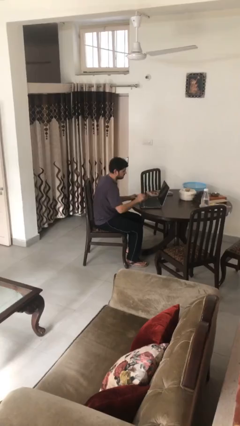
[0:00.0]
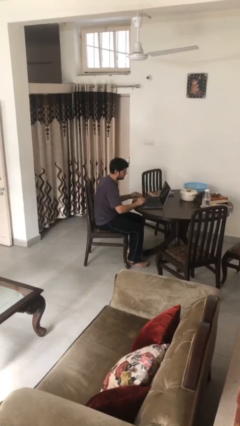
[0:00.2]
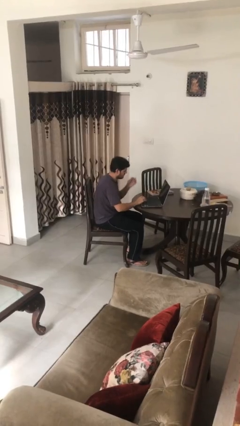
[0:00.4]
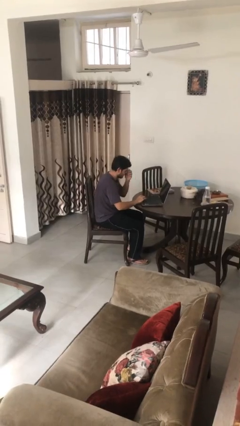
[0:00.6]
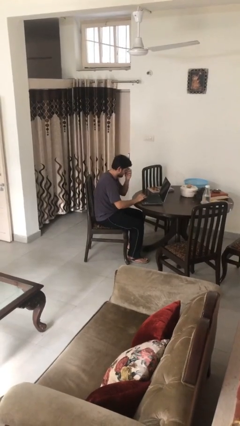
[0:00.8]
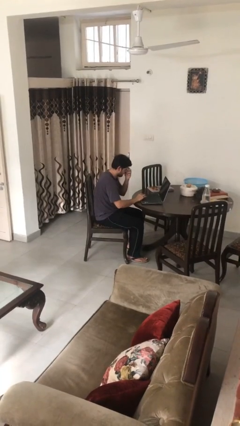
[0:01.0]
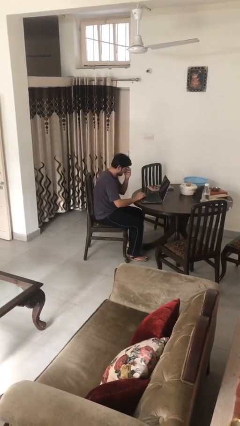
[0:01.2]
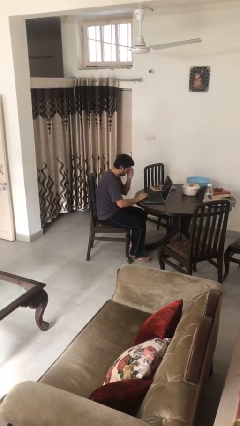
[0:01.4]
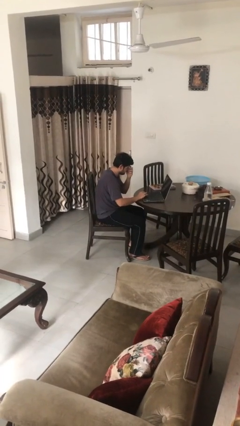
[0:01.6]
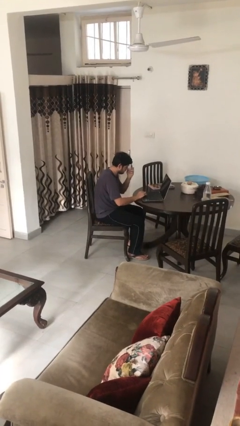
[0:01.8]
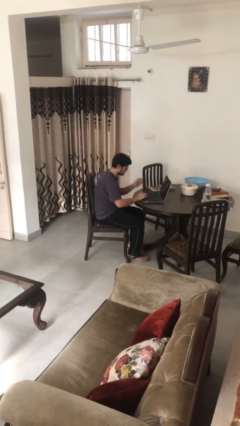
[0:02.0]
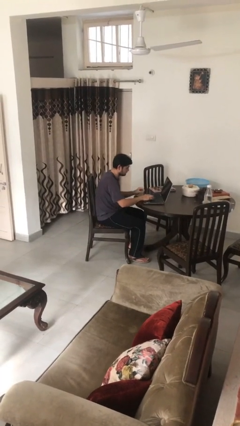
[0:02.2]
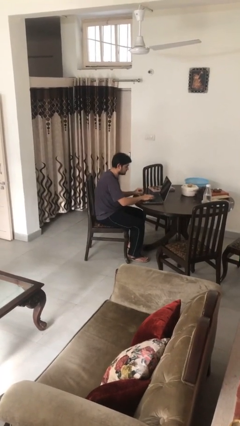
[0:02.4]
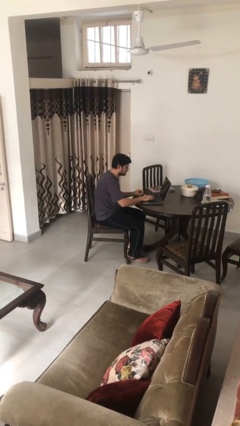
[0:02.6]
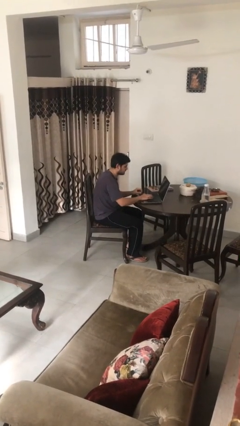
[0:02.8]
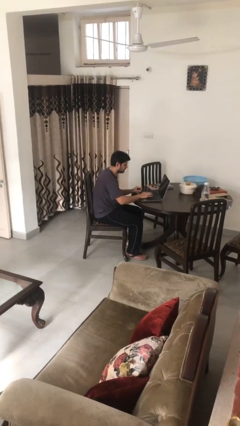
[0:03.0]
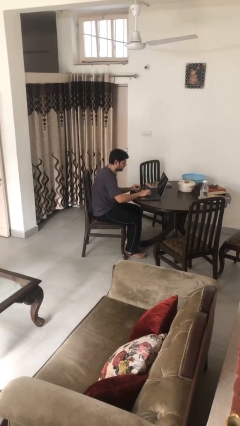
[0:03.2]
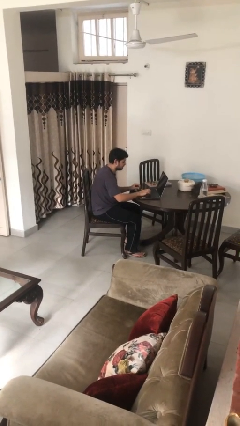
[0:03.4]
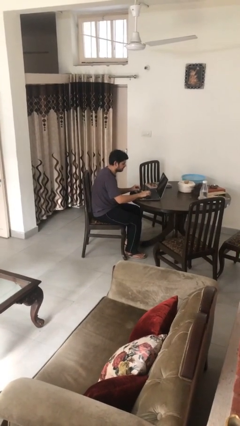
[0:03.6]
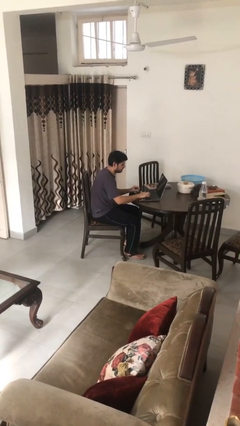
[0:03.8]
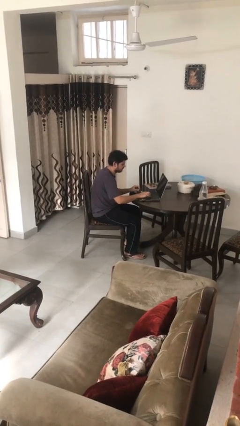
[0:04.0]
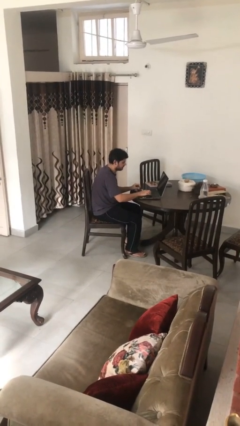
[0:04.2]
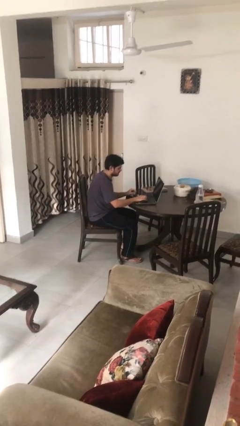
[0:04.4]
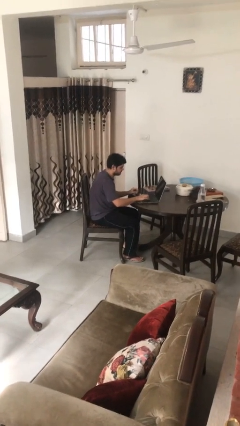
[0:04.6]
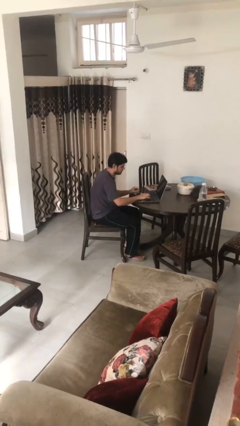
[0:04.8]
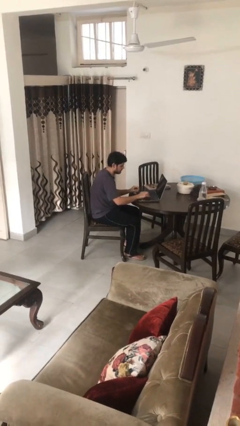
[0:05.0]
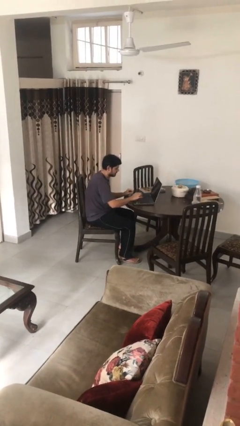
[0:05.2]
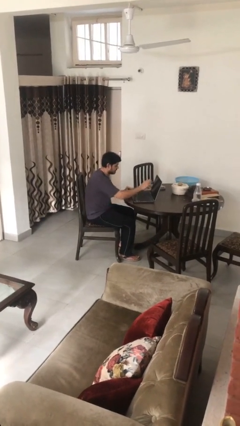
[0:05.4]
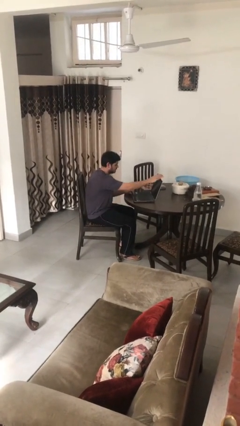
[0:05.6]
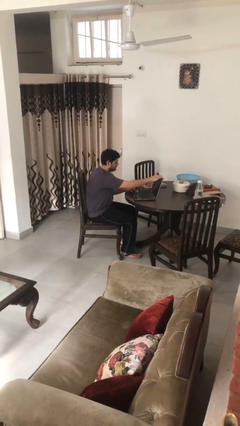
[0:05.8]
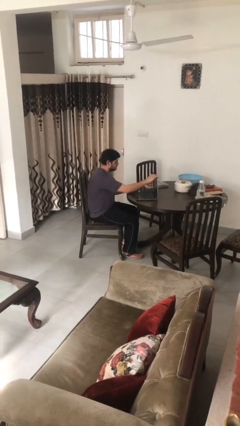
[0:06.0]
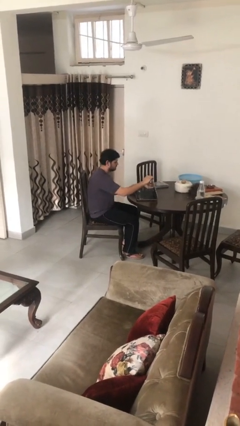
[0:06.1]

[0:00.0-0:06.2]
person interacts with laptop

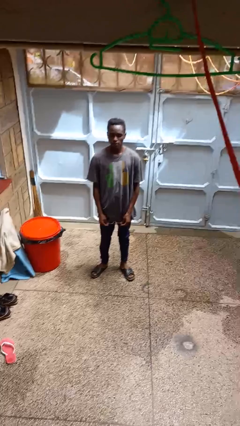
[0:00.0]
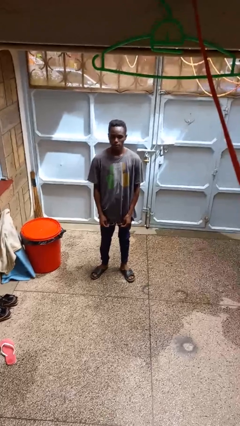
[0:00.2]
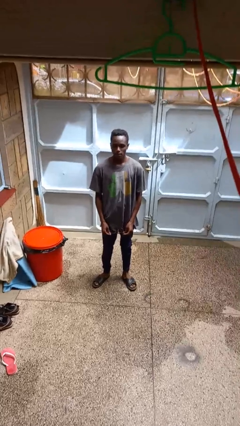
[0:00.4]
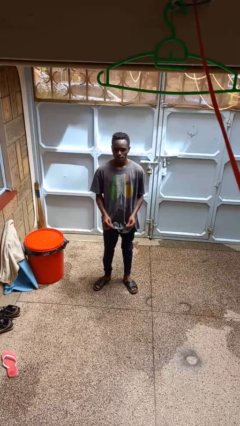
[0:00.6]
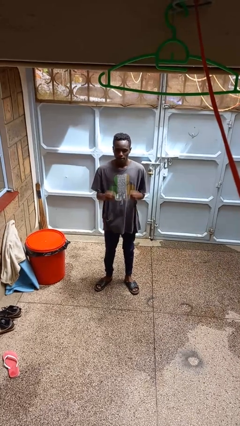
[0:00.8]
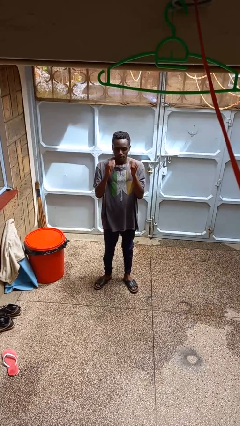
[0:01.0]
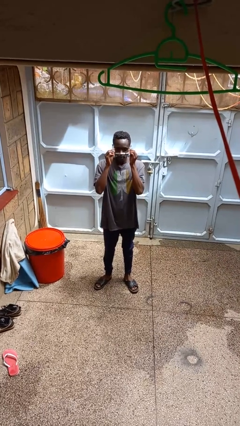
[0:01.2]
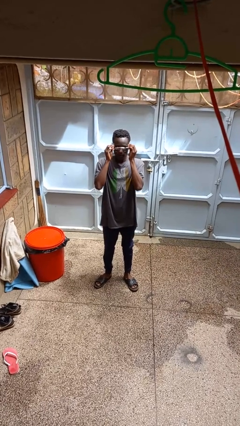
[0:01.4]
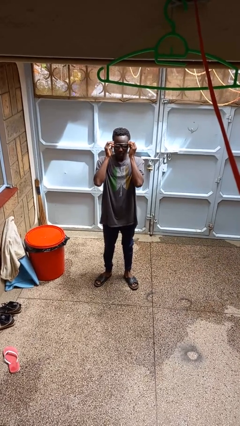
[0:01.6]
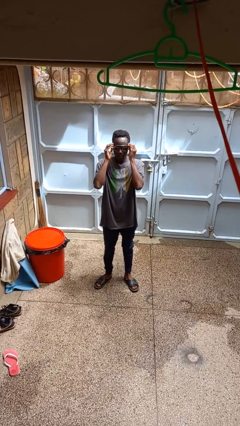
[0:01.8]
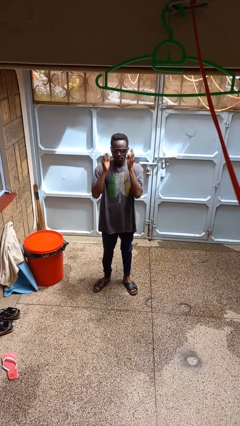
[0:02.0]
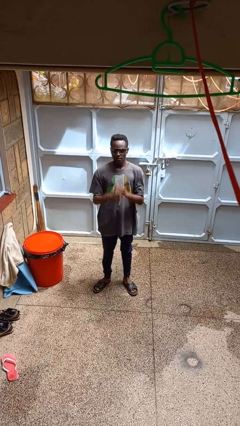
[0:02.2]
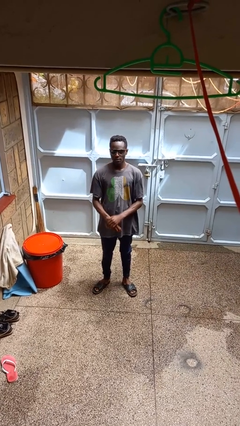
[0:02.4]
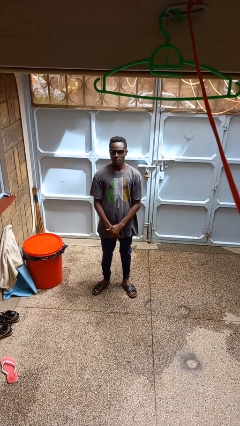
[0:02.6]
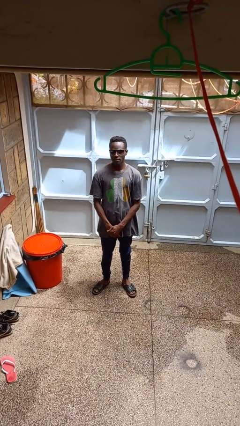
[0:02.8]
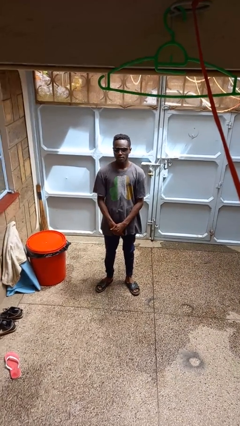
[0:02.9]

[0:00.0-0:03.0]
person puts on sunglasses

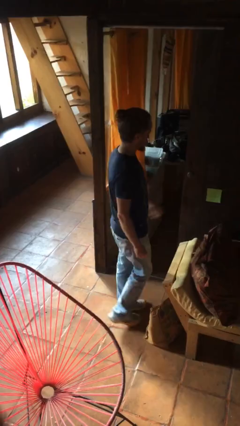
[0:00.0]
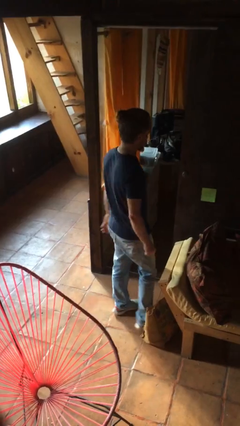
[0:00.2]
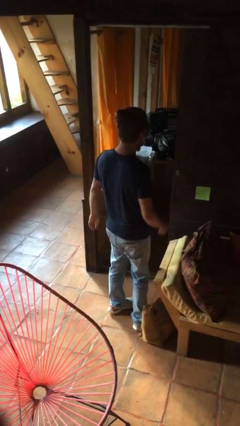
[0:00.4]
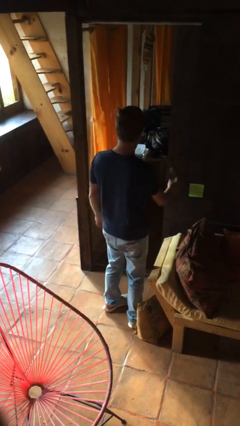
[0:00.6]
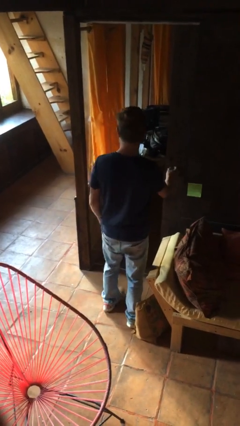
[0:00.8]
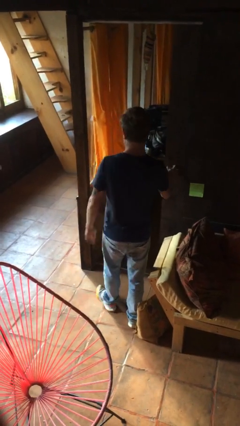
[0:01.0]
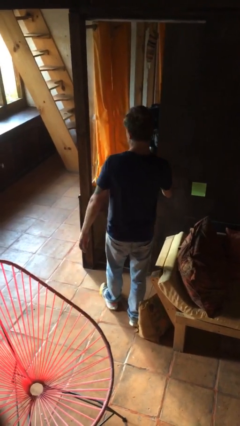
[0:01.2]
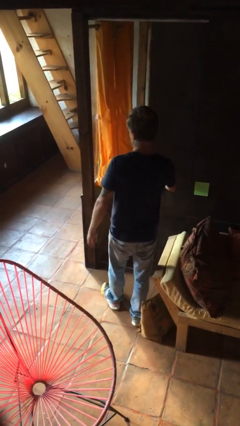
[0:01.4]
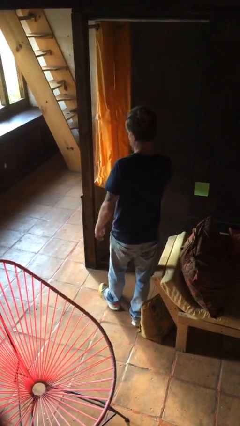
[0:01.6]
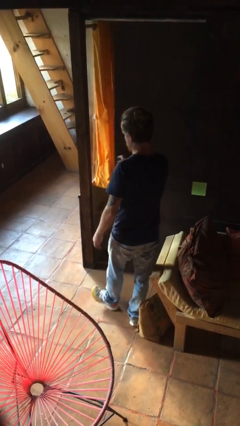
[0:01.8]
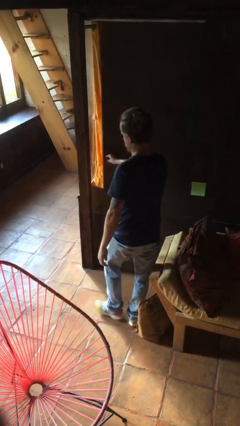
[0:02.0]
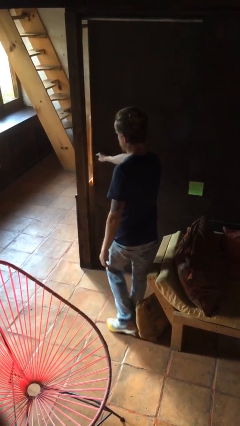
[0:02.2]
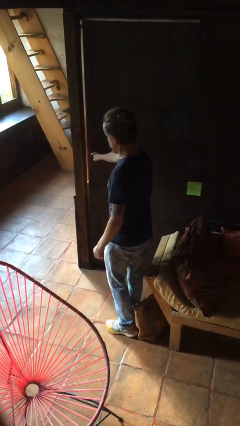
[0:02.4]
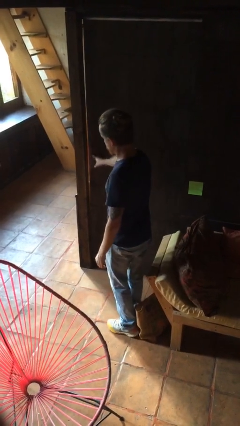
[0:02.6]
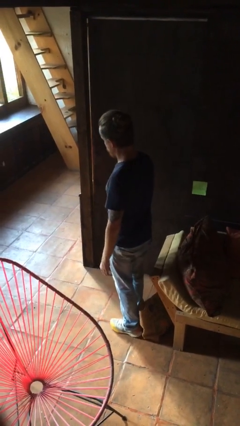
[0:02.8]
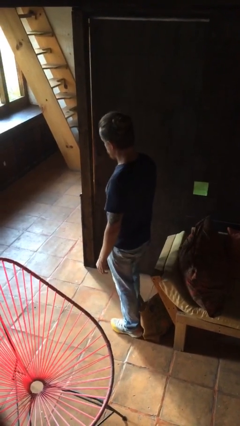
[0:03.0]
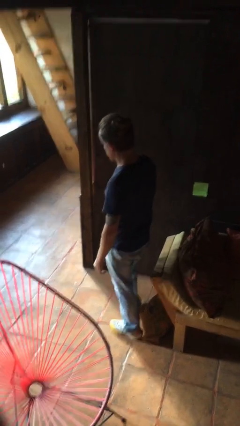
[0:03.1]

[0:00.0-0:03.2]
person closes sliding door

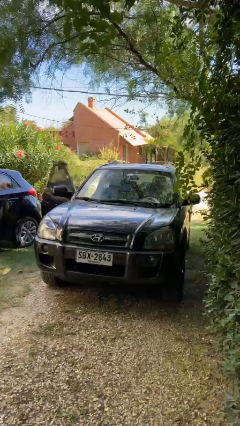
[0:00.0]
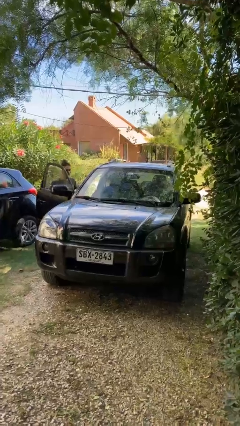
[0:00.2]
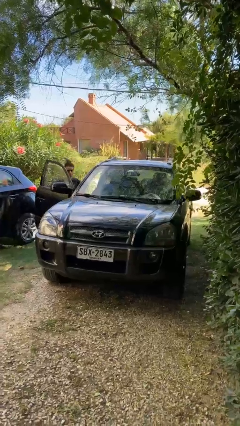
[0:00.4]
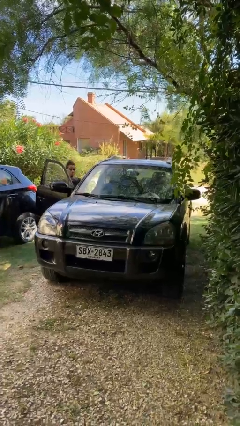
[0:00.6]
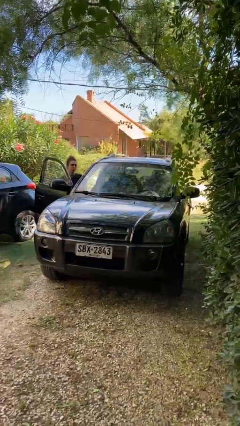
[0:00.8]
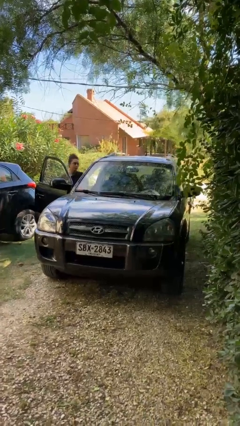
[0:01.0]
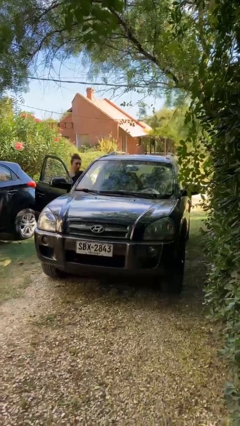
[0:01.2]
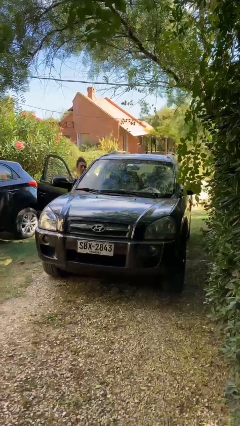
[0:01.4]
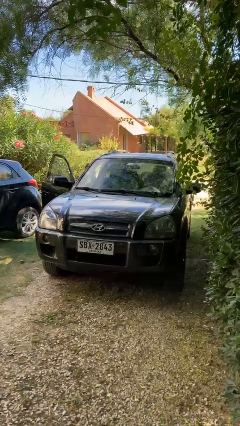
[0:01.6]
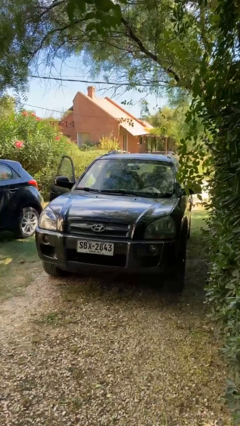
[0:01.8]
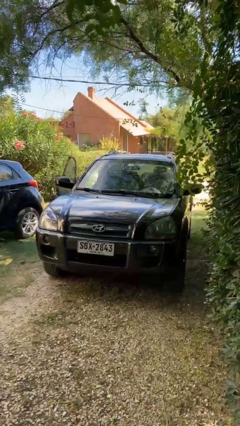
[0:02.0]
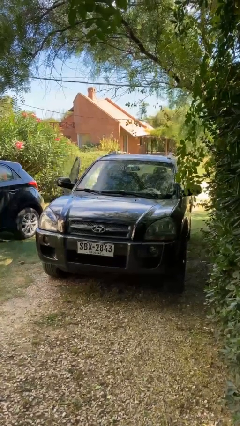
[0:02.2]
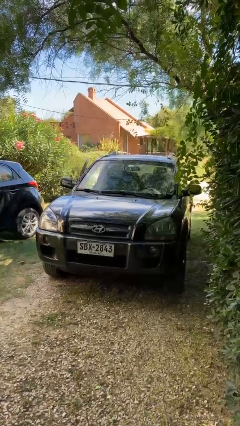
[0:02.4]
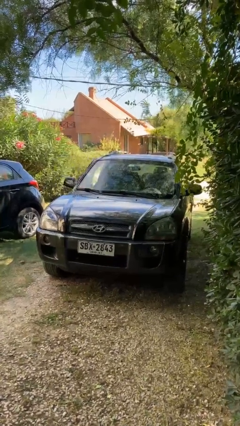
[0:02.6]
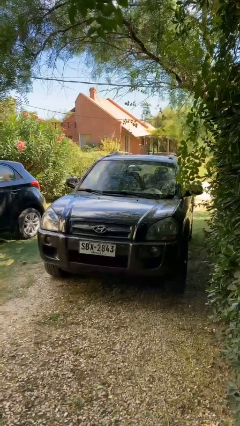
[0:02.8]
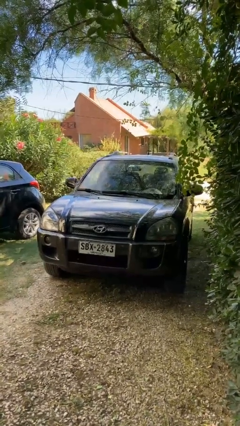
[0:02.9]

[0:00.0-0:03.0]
car picks up person

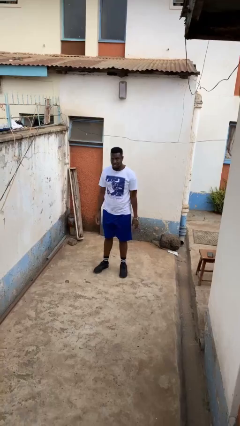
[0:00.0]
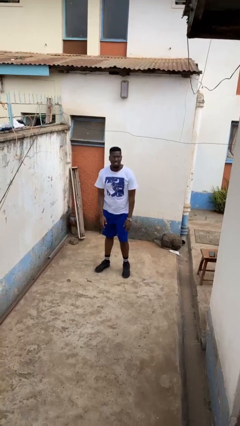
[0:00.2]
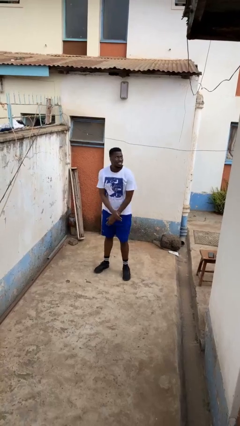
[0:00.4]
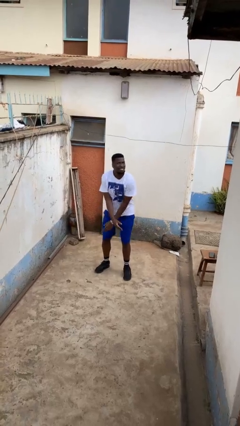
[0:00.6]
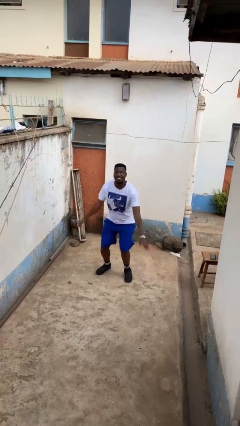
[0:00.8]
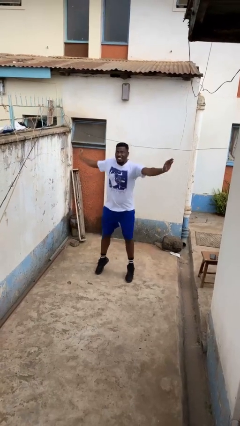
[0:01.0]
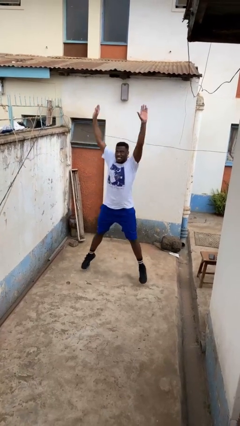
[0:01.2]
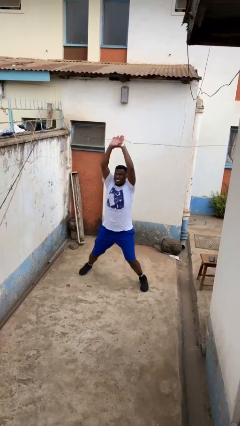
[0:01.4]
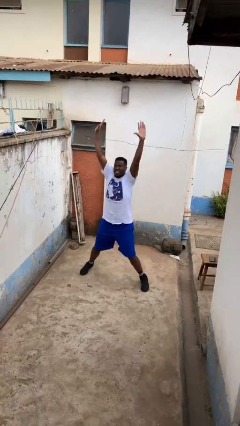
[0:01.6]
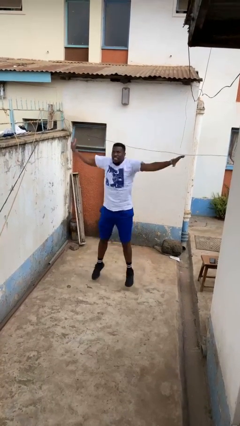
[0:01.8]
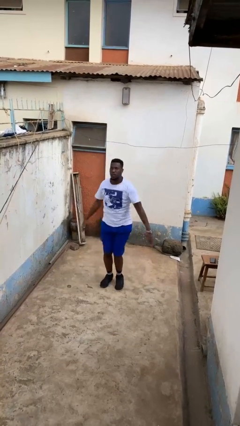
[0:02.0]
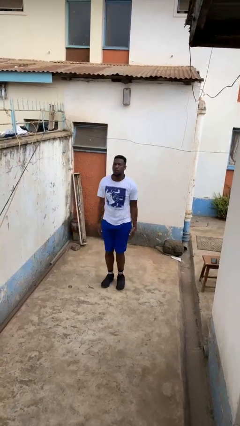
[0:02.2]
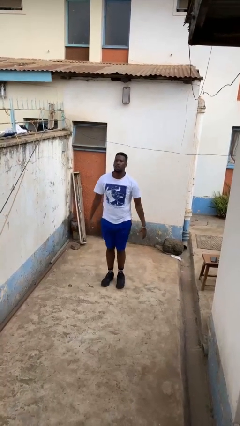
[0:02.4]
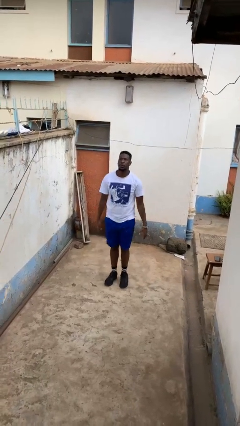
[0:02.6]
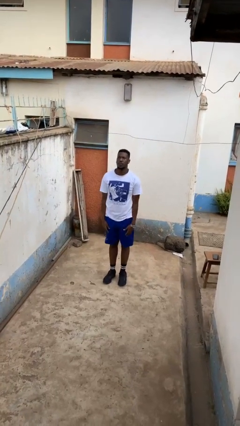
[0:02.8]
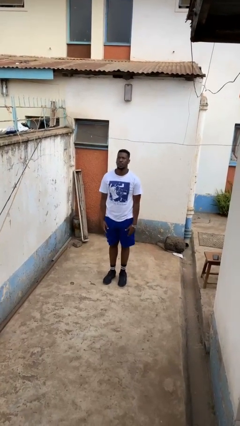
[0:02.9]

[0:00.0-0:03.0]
person exercises with jumping jacks
